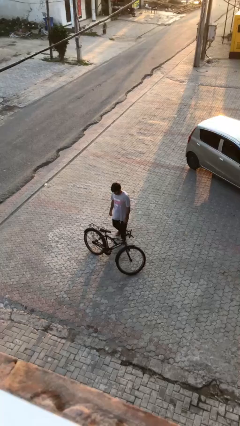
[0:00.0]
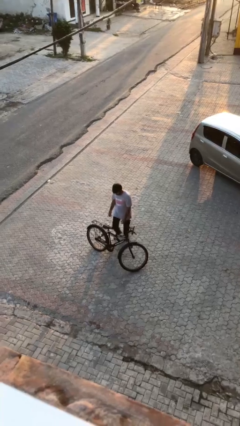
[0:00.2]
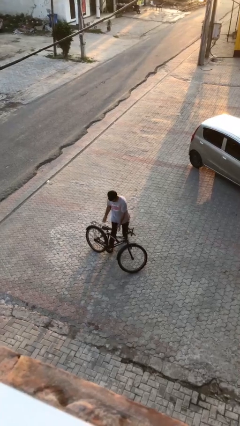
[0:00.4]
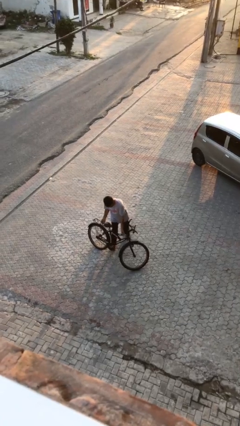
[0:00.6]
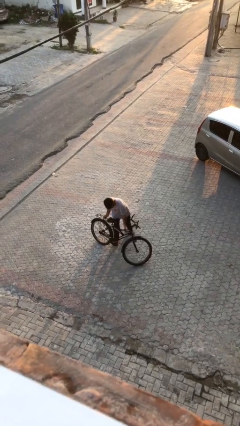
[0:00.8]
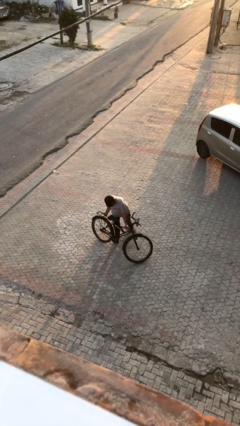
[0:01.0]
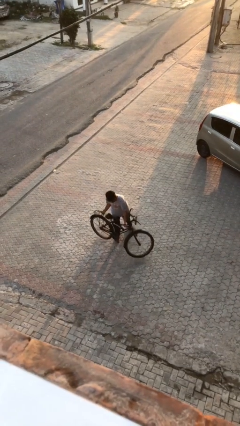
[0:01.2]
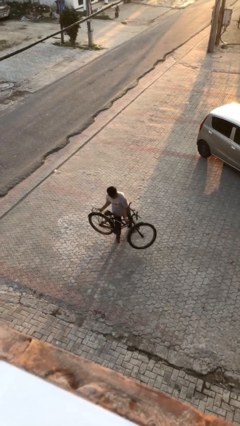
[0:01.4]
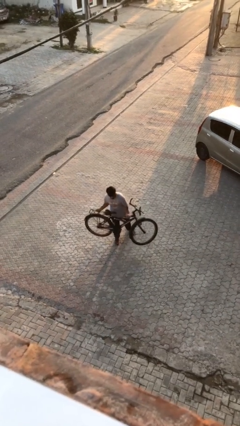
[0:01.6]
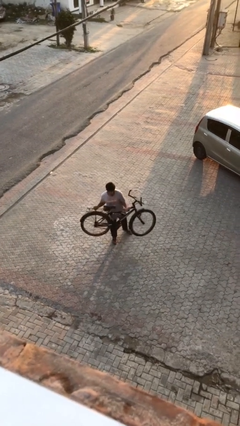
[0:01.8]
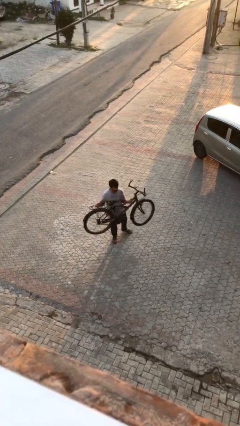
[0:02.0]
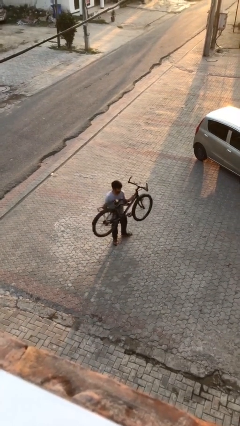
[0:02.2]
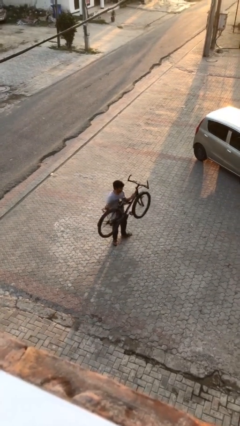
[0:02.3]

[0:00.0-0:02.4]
person picks up object from floor

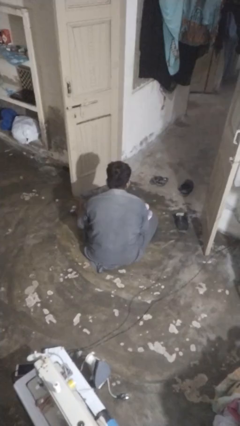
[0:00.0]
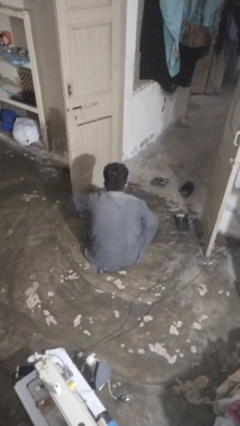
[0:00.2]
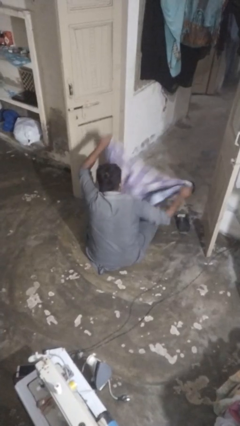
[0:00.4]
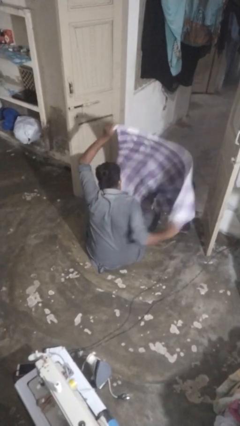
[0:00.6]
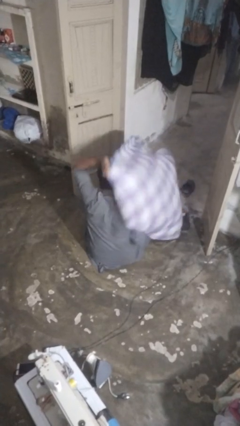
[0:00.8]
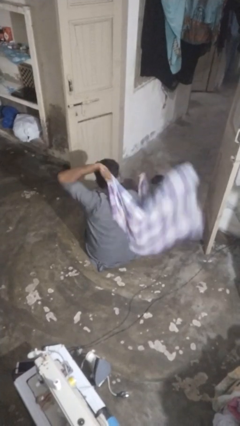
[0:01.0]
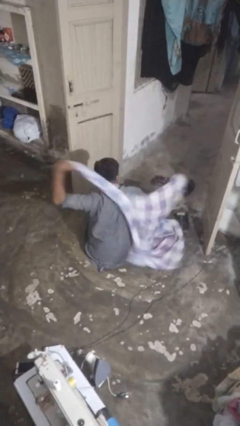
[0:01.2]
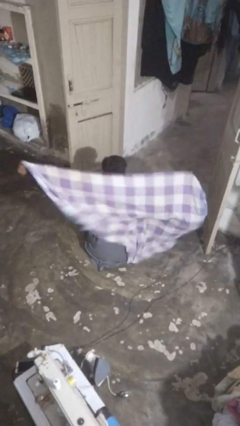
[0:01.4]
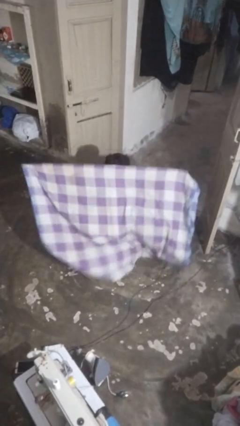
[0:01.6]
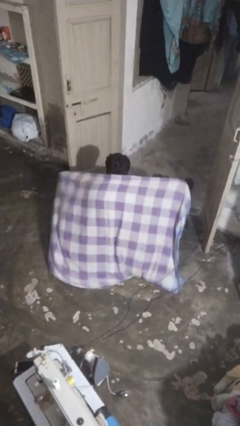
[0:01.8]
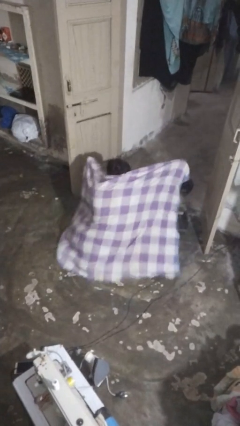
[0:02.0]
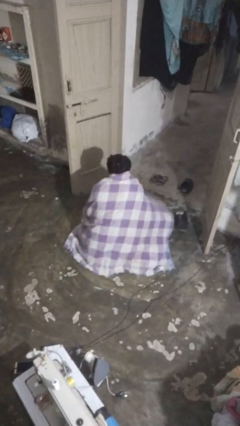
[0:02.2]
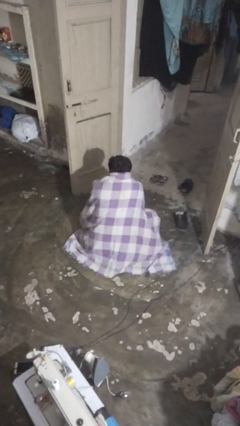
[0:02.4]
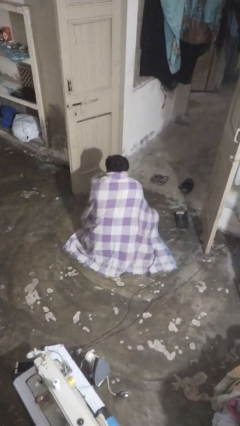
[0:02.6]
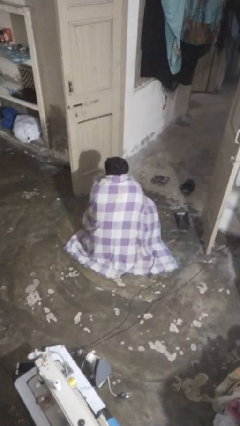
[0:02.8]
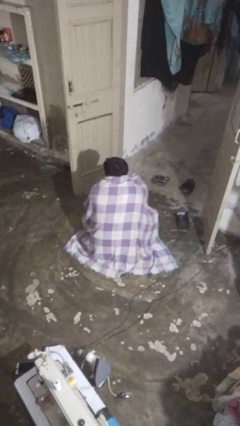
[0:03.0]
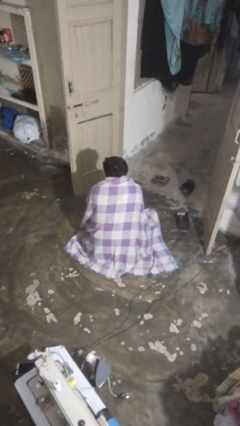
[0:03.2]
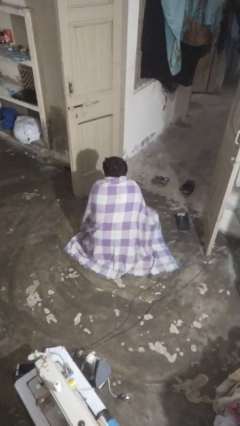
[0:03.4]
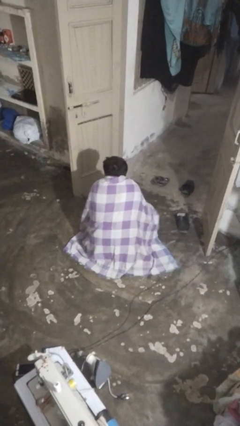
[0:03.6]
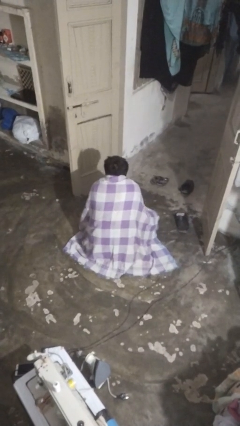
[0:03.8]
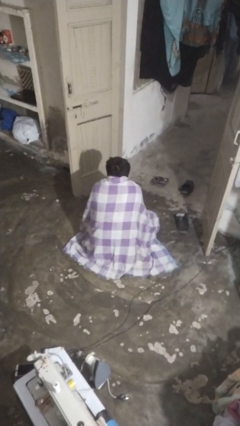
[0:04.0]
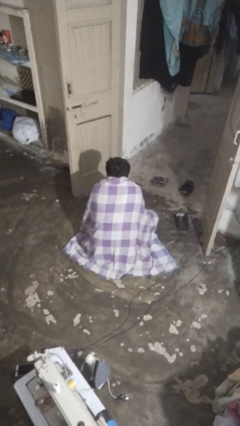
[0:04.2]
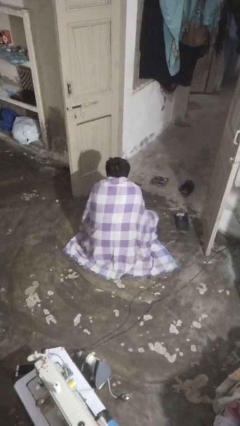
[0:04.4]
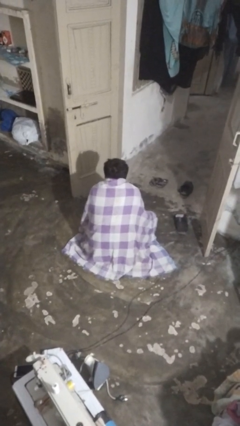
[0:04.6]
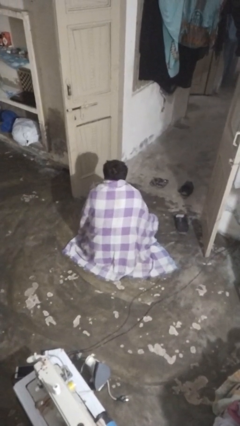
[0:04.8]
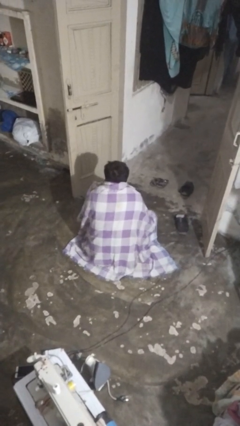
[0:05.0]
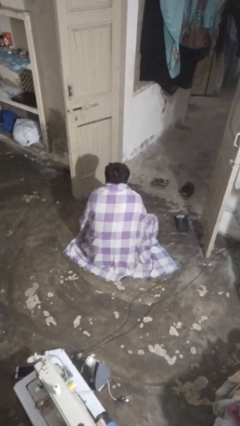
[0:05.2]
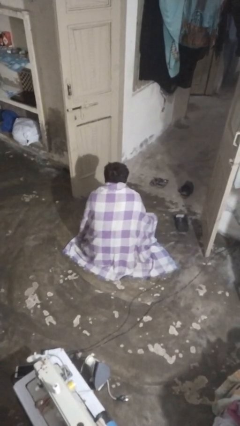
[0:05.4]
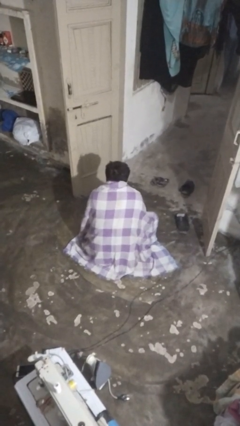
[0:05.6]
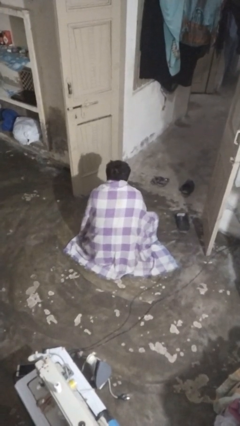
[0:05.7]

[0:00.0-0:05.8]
person covers with blanket

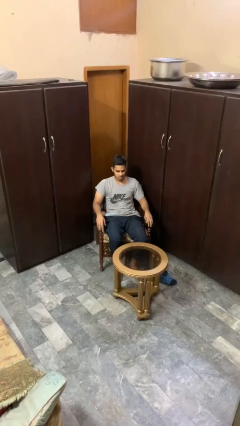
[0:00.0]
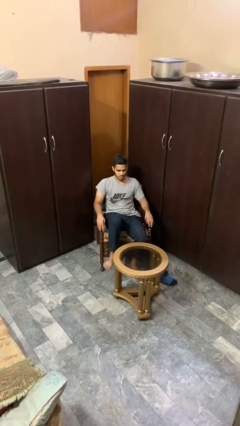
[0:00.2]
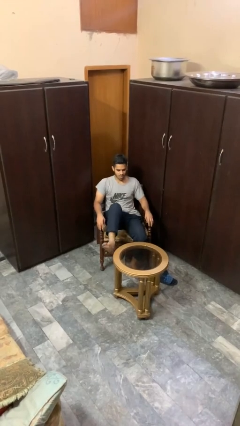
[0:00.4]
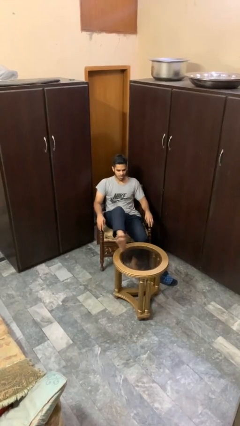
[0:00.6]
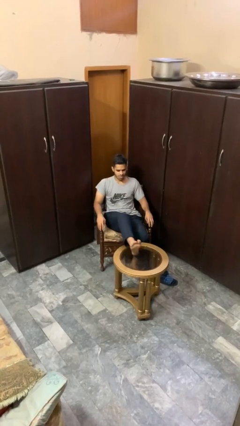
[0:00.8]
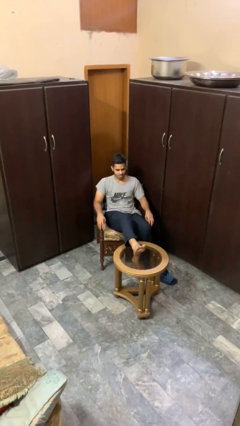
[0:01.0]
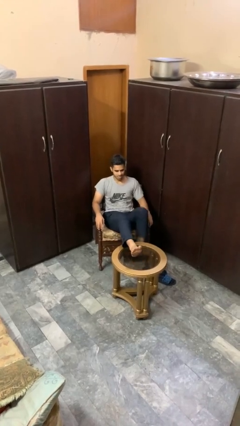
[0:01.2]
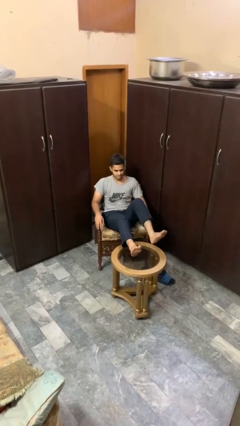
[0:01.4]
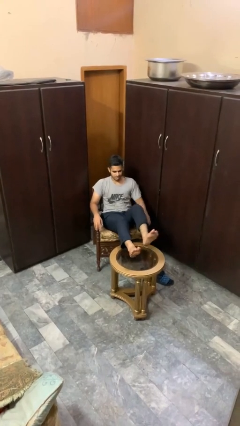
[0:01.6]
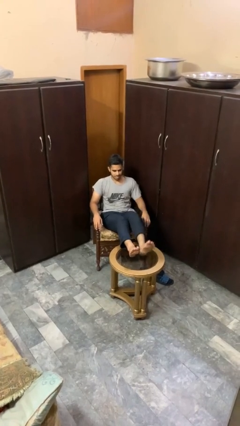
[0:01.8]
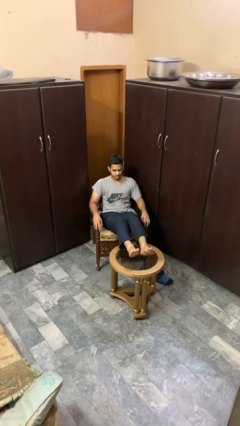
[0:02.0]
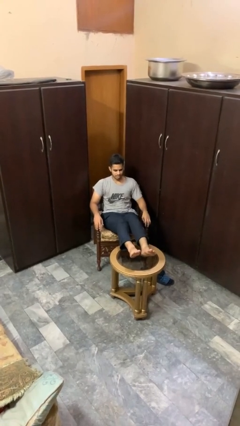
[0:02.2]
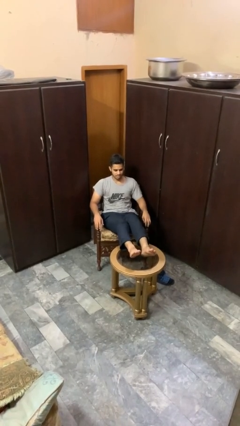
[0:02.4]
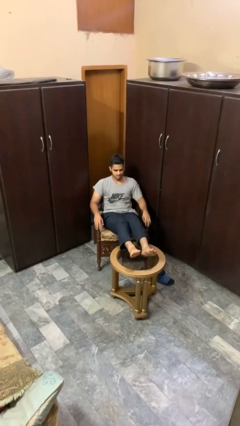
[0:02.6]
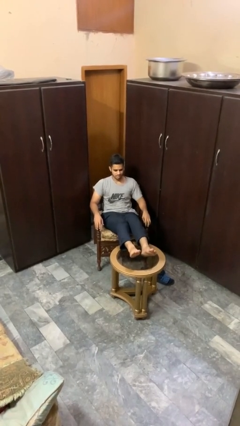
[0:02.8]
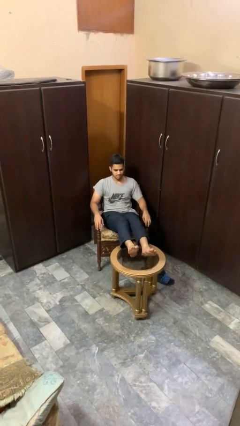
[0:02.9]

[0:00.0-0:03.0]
person puts feet up

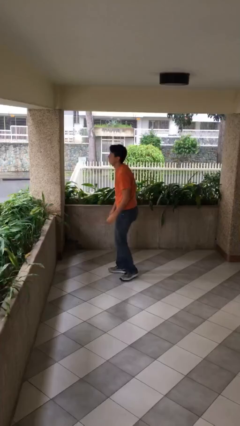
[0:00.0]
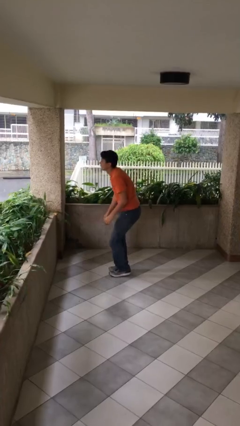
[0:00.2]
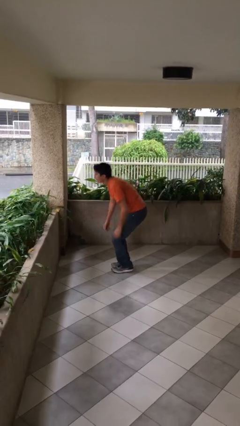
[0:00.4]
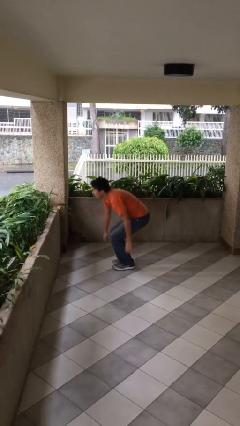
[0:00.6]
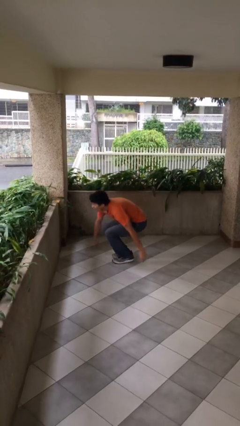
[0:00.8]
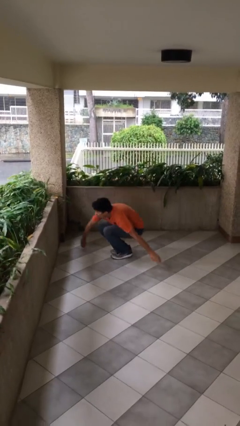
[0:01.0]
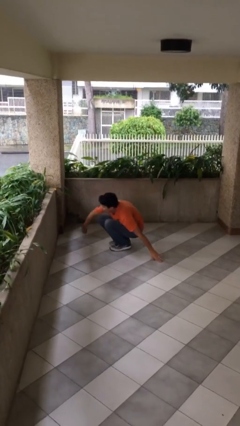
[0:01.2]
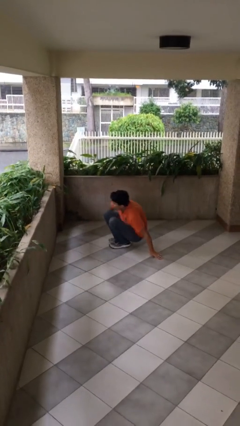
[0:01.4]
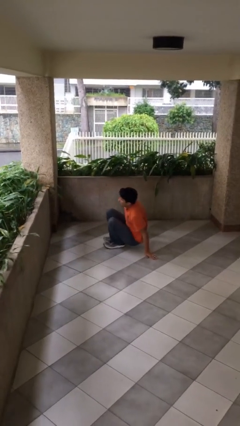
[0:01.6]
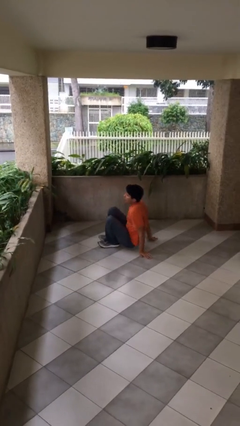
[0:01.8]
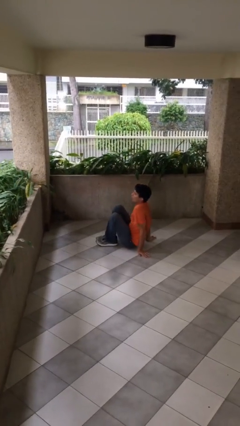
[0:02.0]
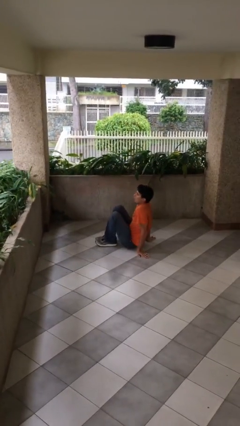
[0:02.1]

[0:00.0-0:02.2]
person sits down

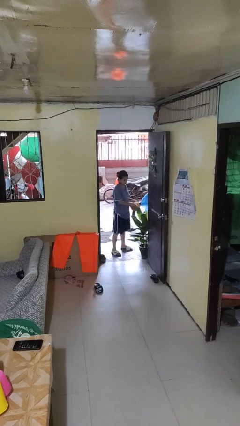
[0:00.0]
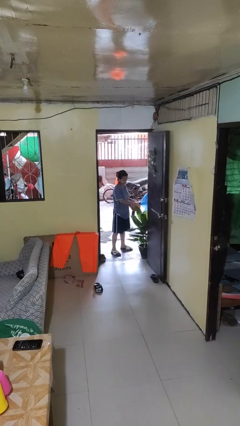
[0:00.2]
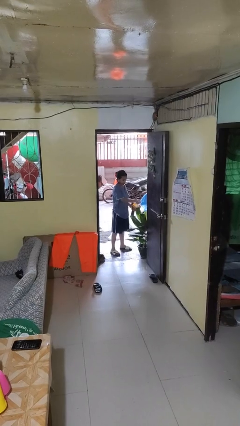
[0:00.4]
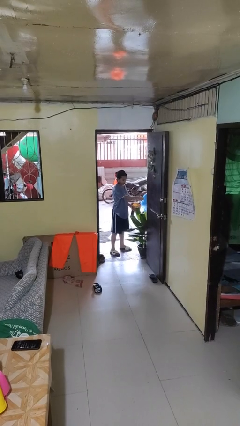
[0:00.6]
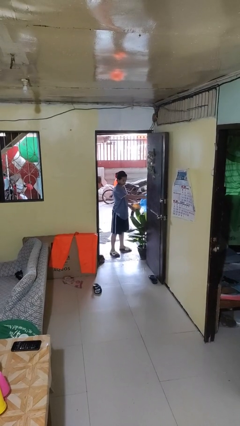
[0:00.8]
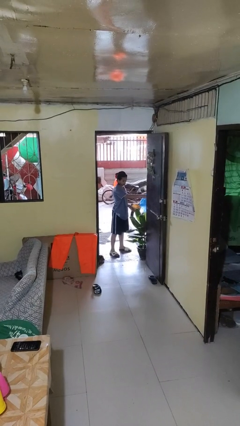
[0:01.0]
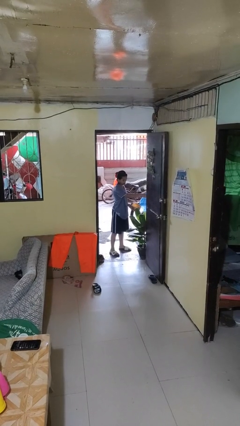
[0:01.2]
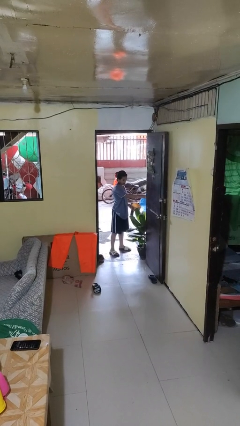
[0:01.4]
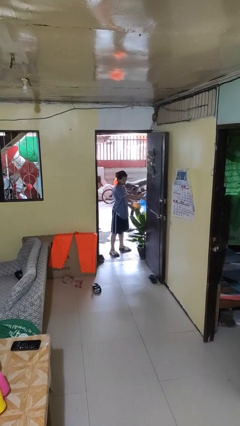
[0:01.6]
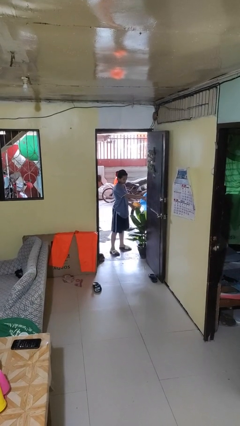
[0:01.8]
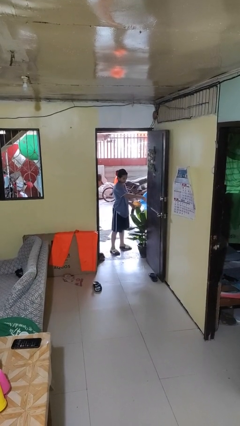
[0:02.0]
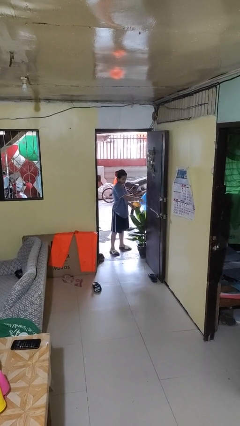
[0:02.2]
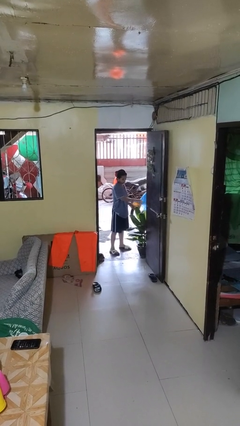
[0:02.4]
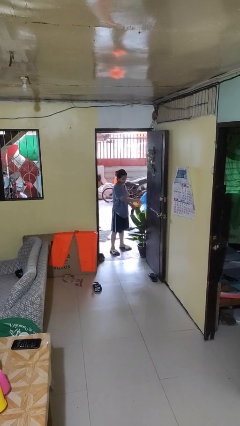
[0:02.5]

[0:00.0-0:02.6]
person waters houseplant

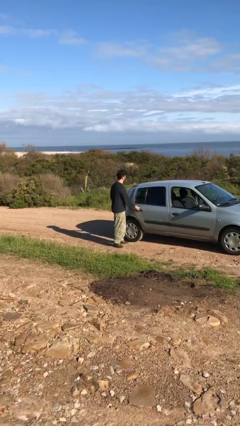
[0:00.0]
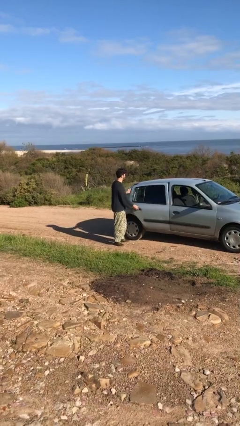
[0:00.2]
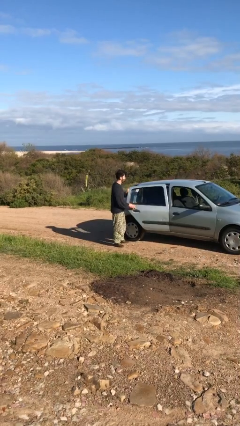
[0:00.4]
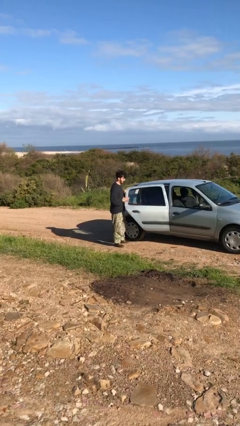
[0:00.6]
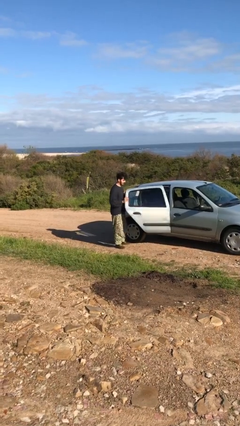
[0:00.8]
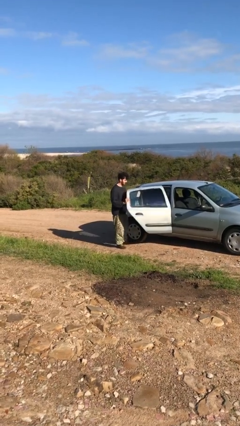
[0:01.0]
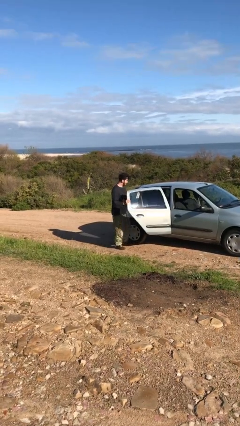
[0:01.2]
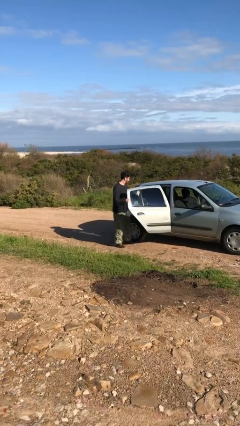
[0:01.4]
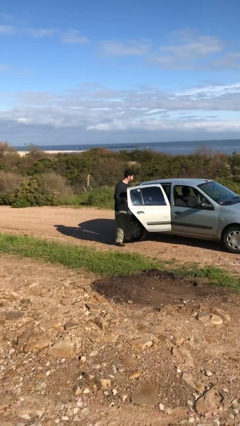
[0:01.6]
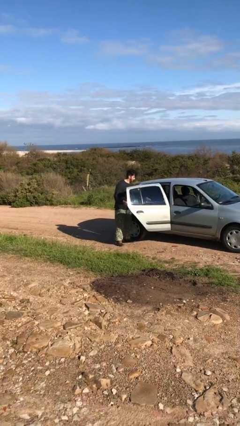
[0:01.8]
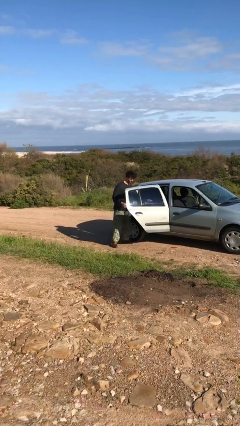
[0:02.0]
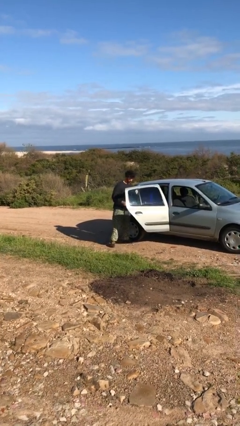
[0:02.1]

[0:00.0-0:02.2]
person opens car door
